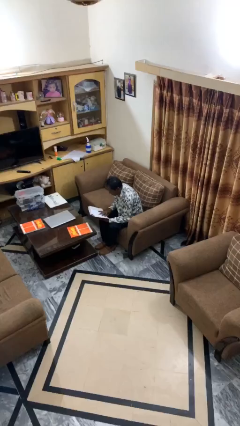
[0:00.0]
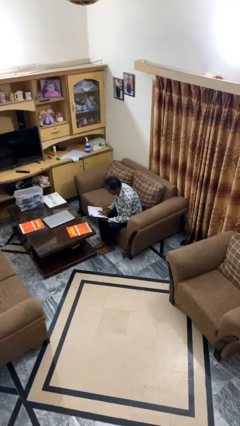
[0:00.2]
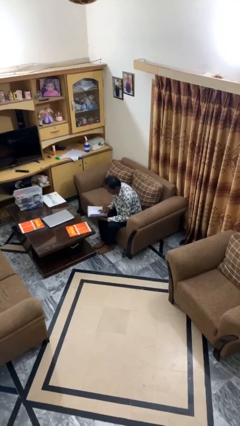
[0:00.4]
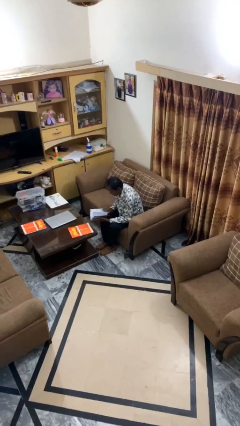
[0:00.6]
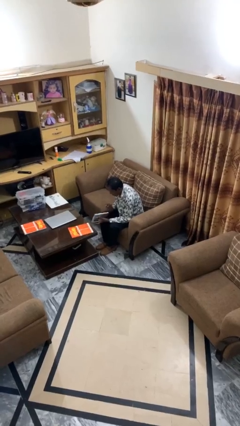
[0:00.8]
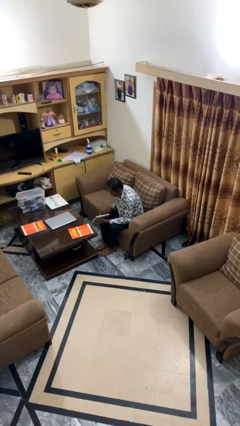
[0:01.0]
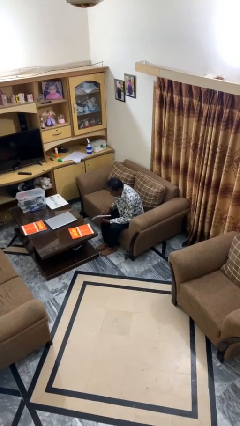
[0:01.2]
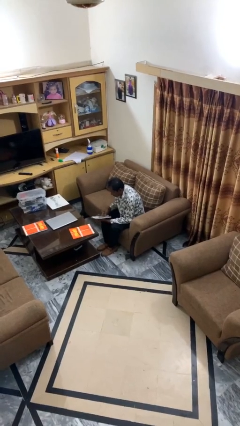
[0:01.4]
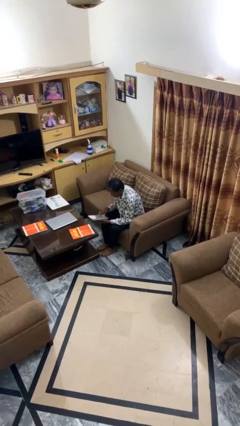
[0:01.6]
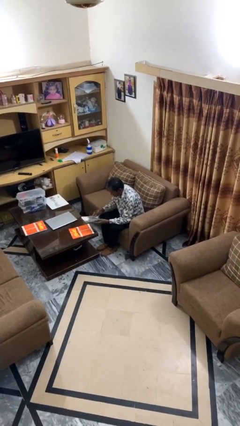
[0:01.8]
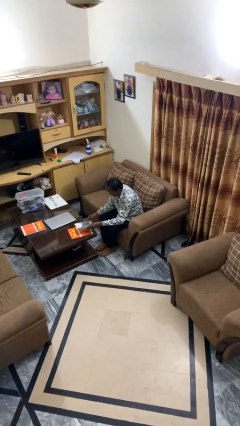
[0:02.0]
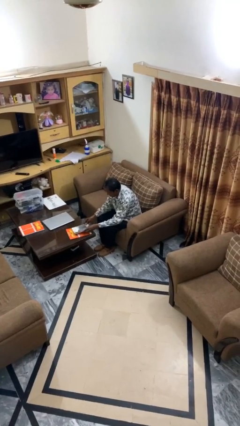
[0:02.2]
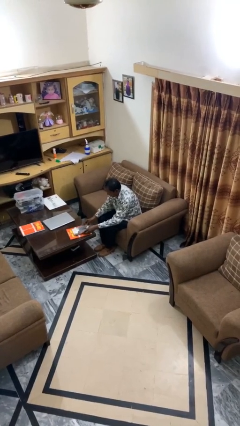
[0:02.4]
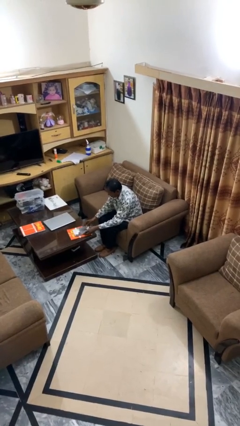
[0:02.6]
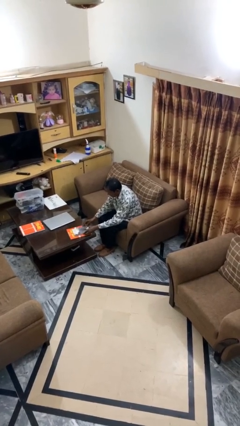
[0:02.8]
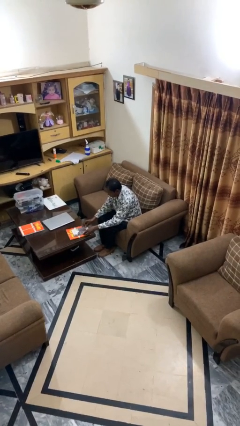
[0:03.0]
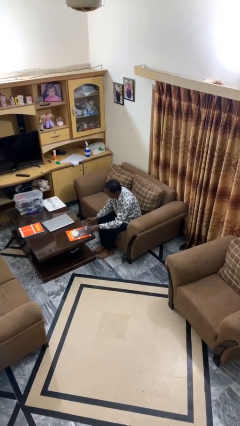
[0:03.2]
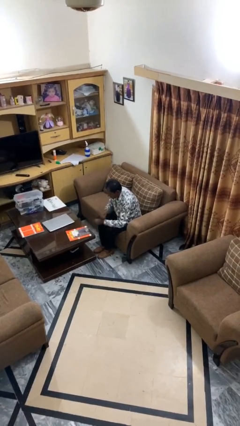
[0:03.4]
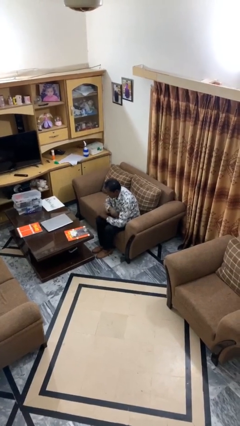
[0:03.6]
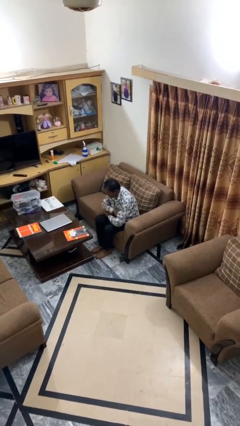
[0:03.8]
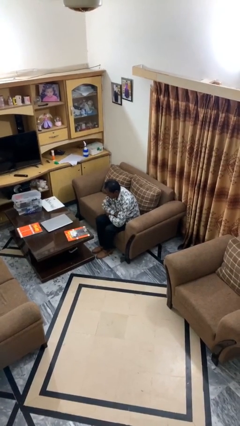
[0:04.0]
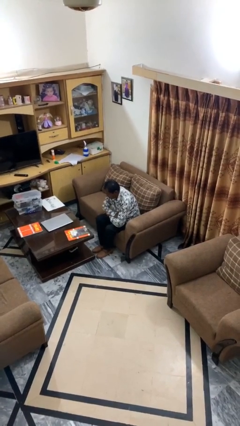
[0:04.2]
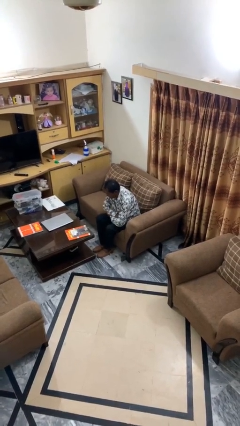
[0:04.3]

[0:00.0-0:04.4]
person puts down object on table

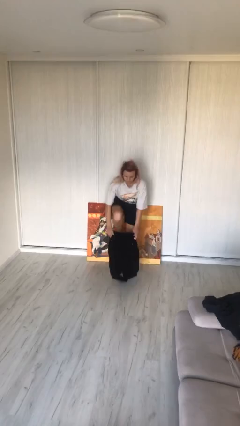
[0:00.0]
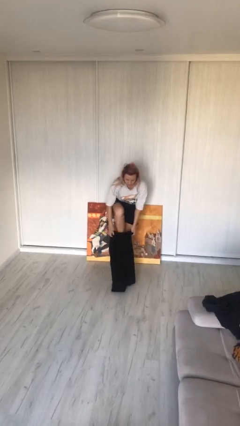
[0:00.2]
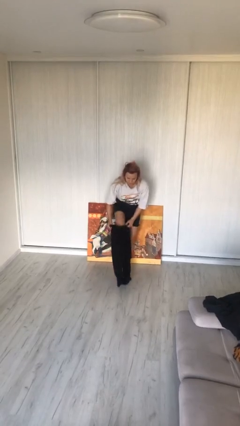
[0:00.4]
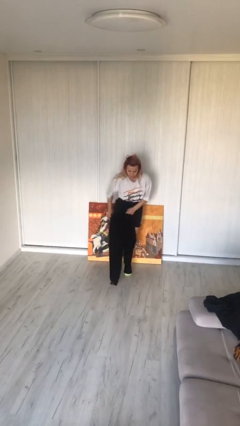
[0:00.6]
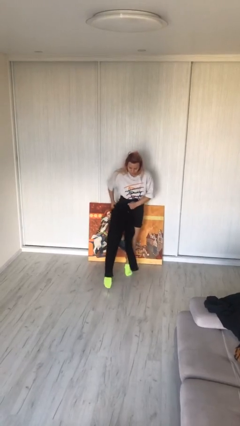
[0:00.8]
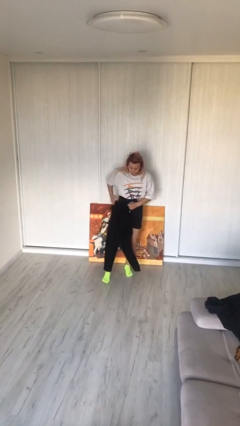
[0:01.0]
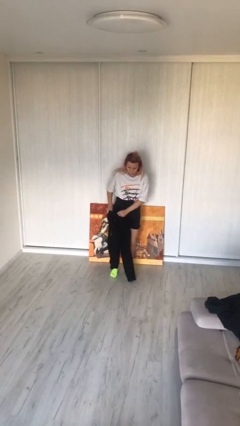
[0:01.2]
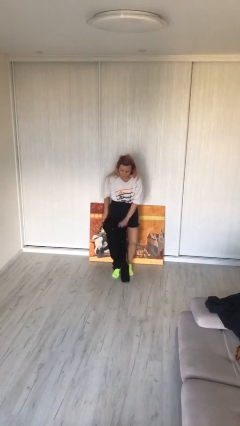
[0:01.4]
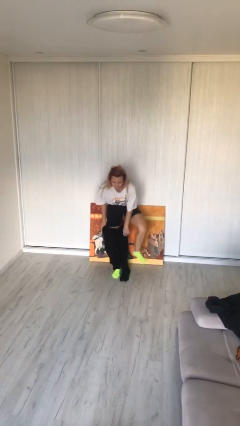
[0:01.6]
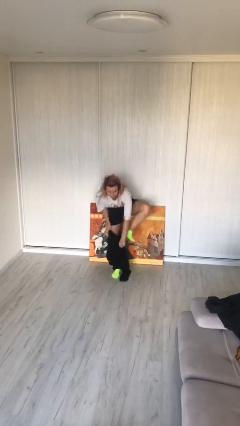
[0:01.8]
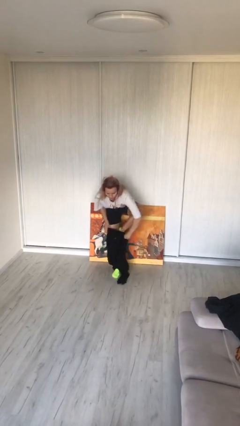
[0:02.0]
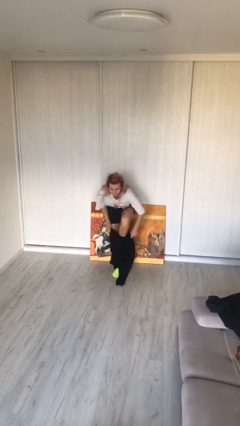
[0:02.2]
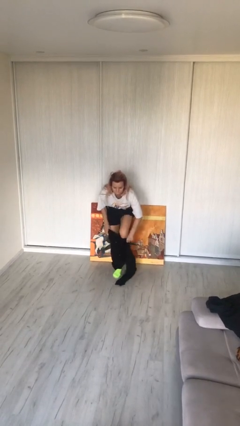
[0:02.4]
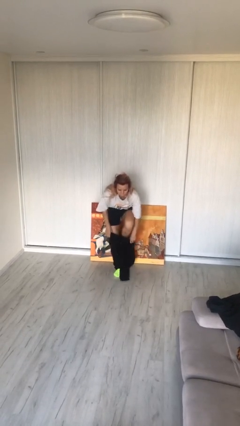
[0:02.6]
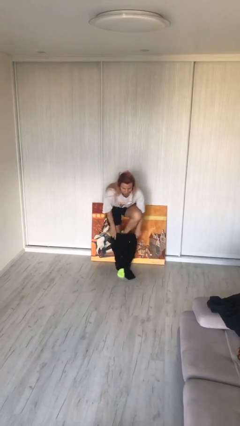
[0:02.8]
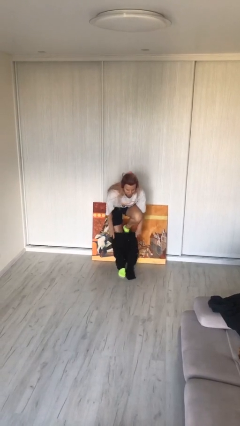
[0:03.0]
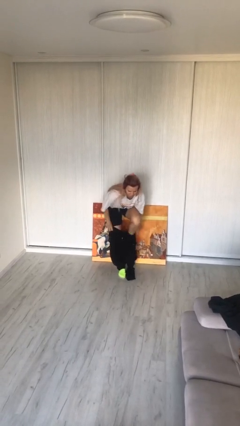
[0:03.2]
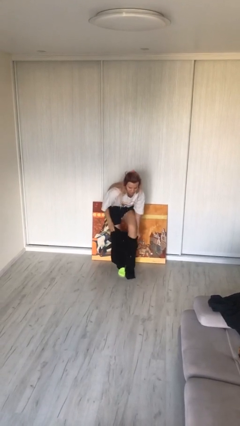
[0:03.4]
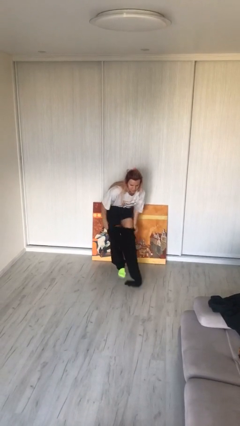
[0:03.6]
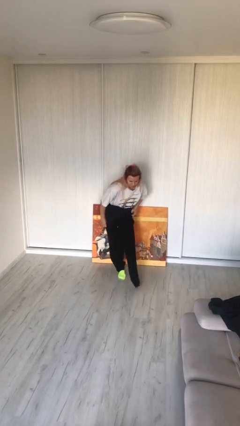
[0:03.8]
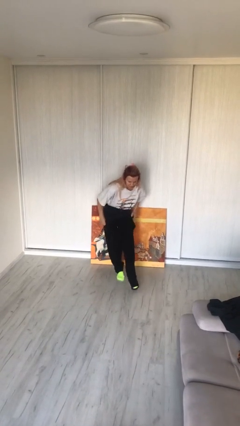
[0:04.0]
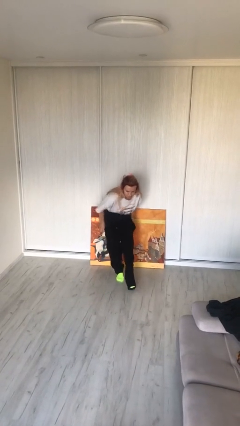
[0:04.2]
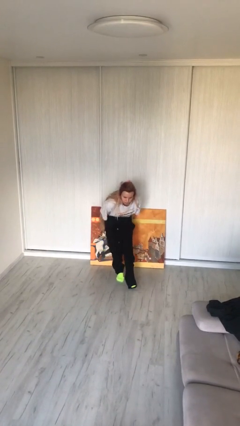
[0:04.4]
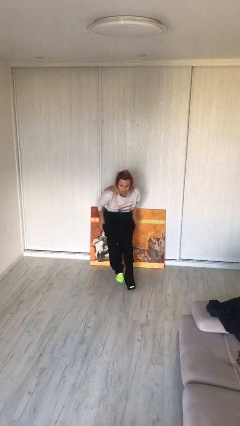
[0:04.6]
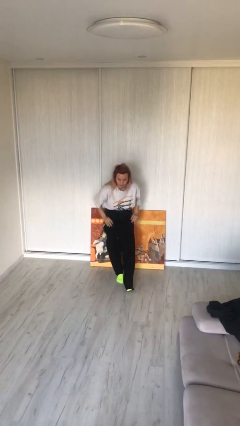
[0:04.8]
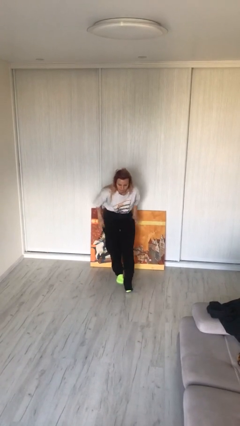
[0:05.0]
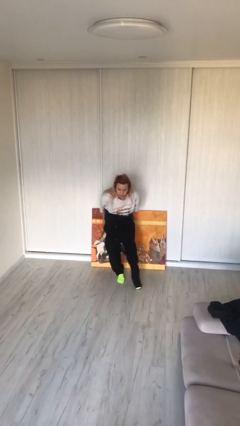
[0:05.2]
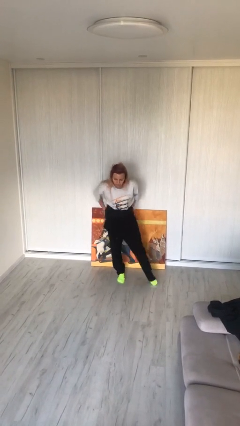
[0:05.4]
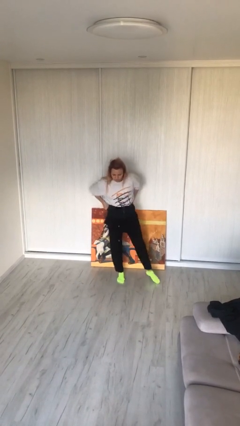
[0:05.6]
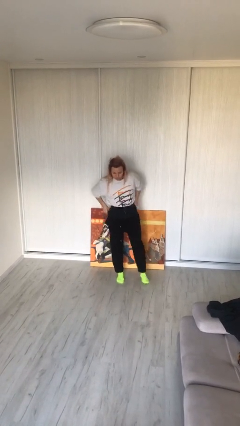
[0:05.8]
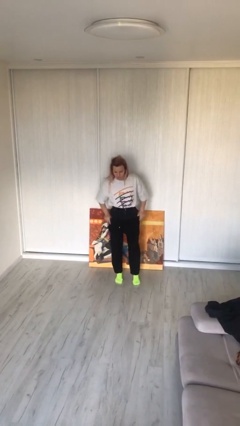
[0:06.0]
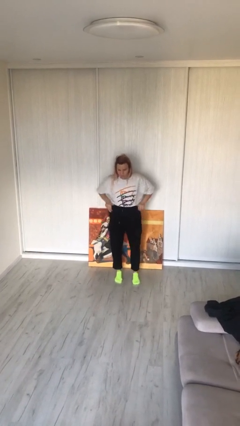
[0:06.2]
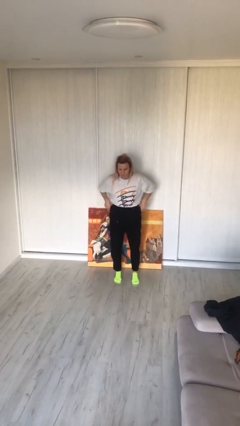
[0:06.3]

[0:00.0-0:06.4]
person puts on pants

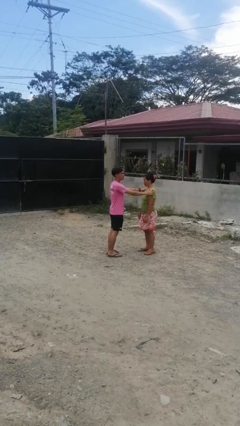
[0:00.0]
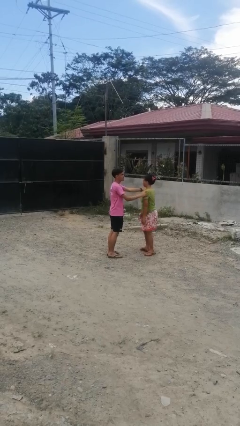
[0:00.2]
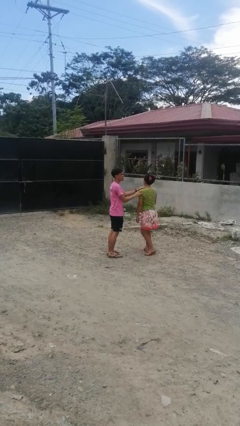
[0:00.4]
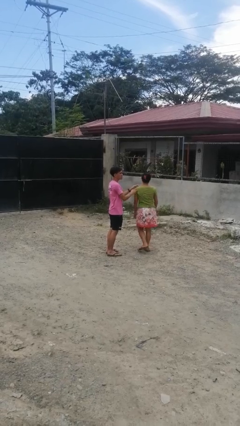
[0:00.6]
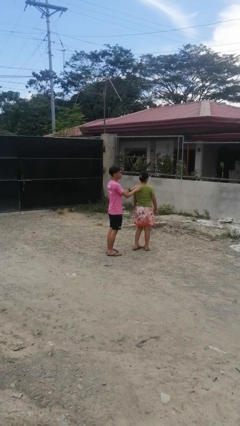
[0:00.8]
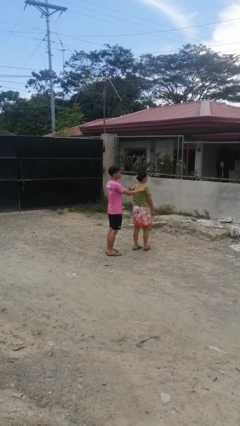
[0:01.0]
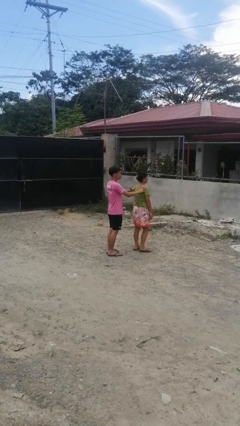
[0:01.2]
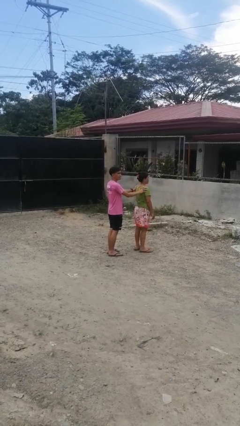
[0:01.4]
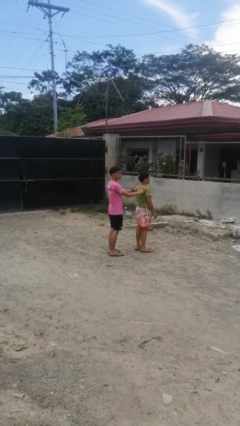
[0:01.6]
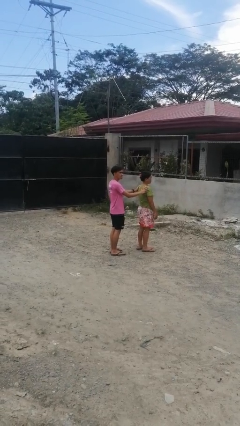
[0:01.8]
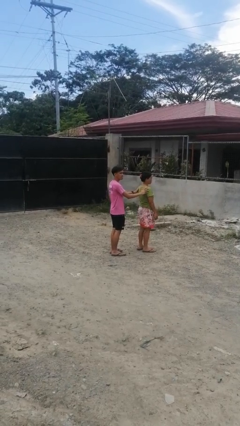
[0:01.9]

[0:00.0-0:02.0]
person spins person around

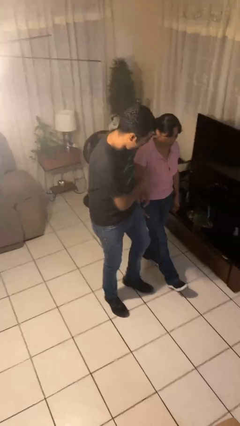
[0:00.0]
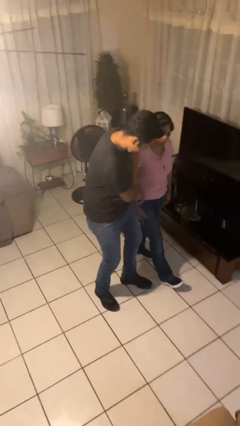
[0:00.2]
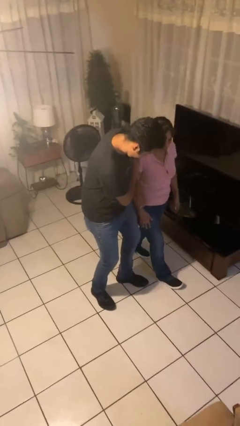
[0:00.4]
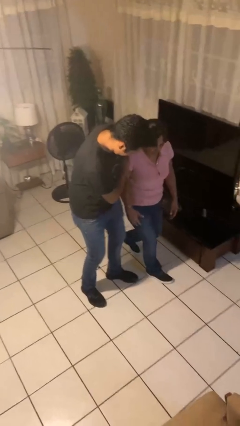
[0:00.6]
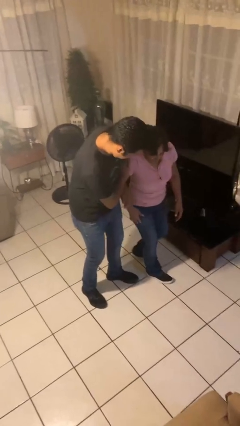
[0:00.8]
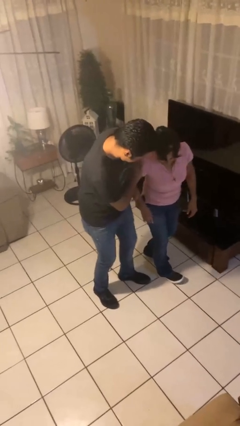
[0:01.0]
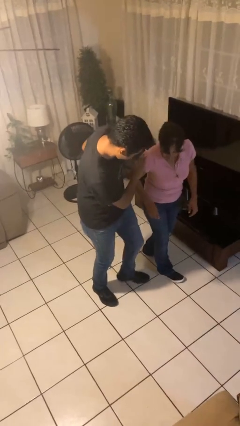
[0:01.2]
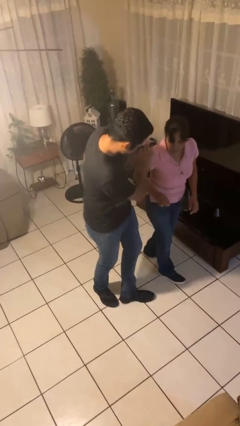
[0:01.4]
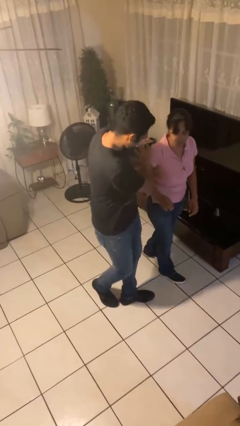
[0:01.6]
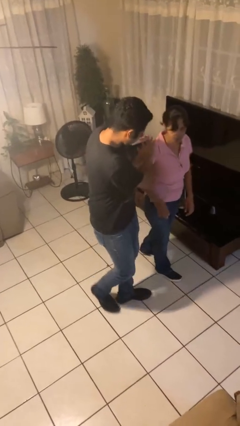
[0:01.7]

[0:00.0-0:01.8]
person bumps into person

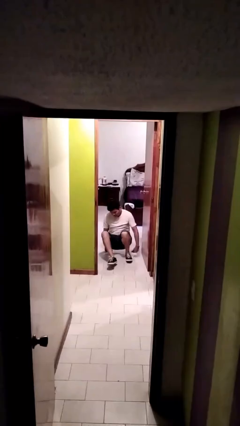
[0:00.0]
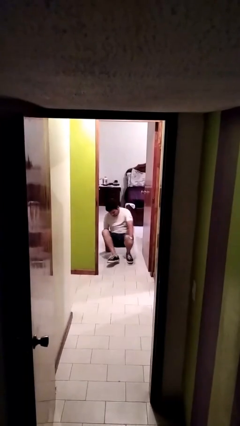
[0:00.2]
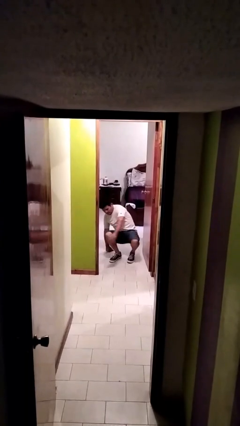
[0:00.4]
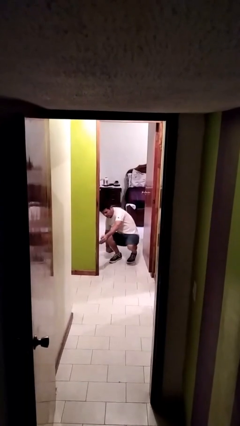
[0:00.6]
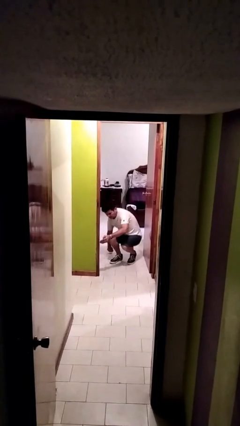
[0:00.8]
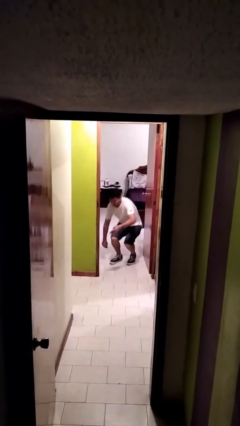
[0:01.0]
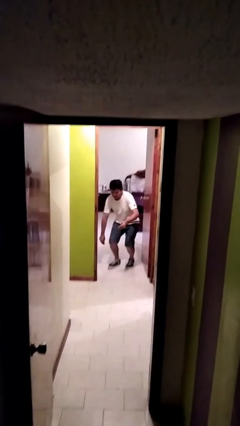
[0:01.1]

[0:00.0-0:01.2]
person stands up

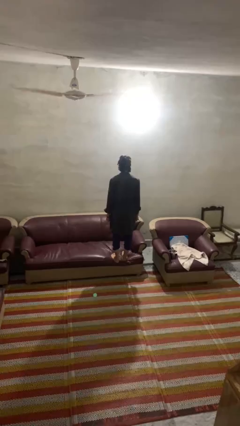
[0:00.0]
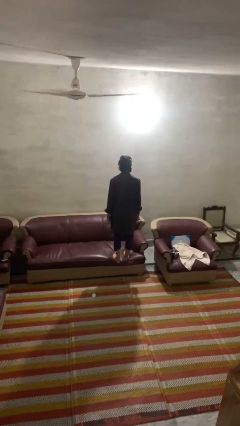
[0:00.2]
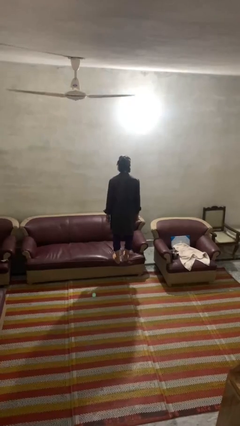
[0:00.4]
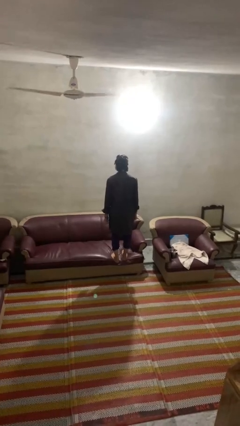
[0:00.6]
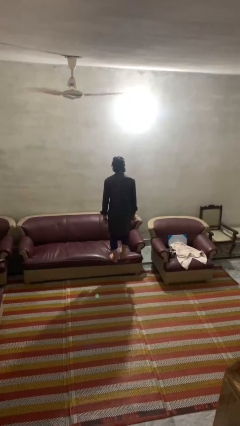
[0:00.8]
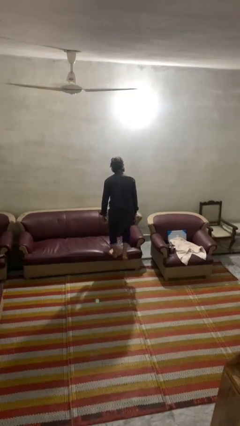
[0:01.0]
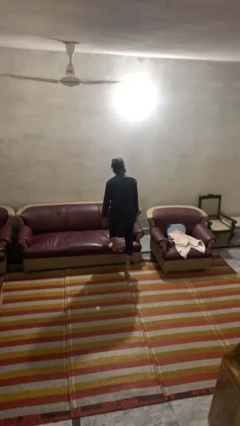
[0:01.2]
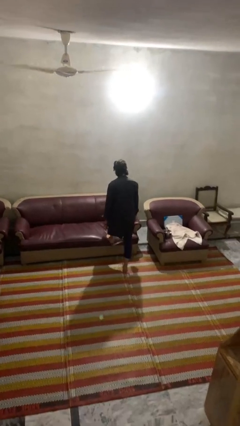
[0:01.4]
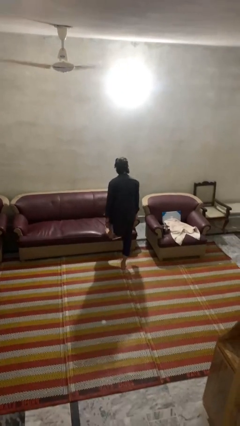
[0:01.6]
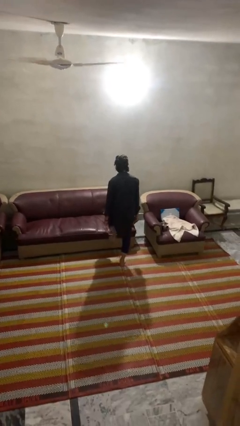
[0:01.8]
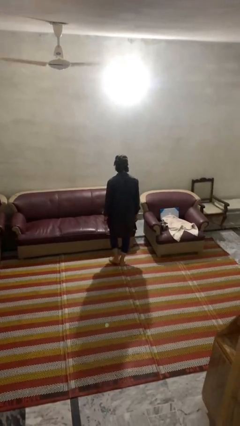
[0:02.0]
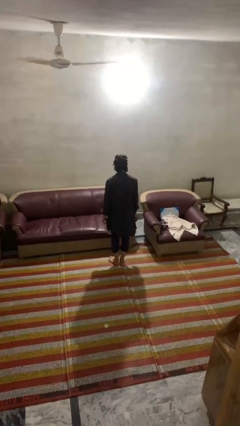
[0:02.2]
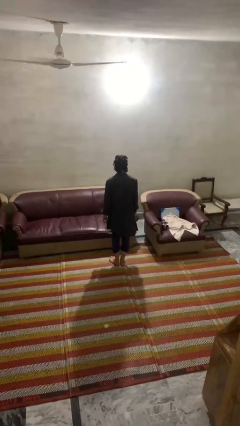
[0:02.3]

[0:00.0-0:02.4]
person climbs off couch
